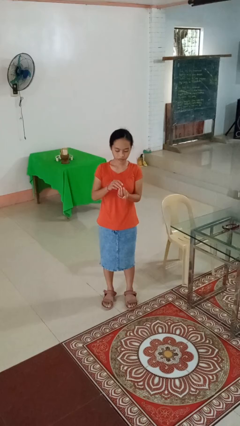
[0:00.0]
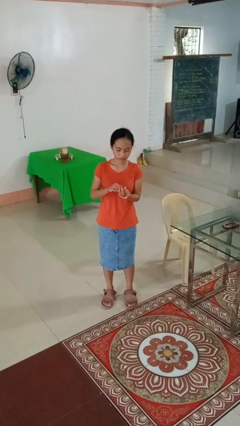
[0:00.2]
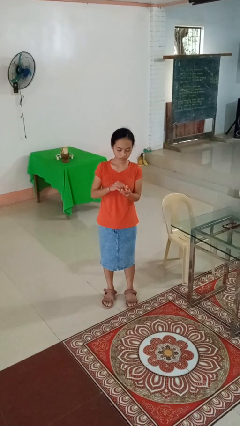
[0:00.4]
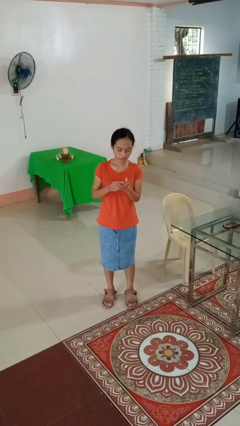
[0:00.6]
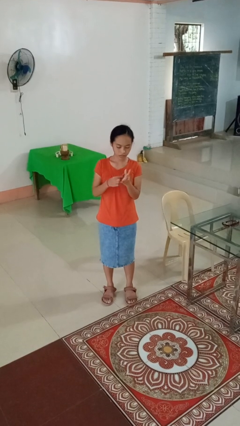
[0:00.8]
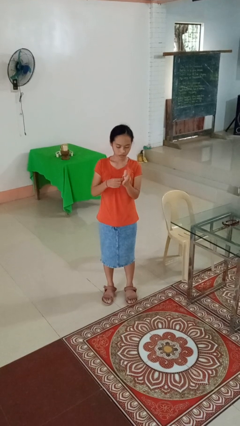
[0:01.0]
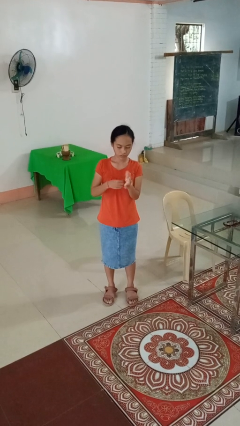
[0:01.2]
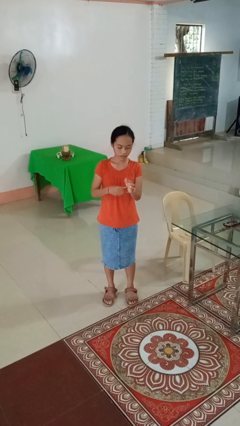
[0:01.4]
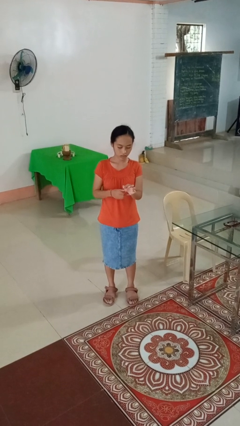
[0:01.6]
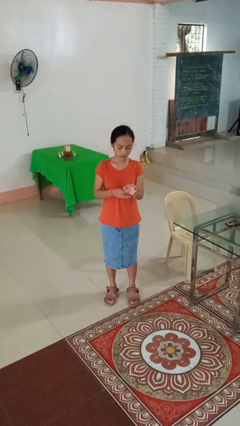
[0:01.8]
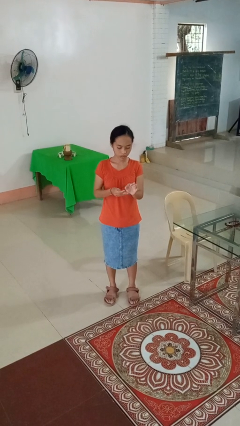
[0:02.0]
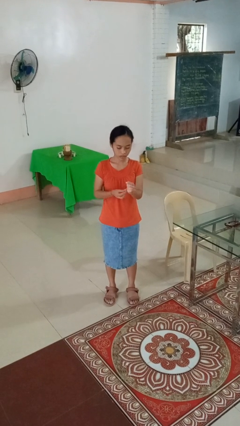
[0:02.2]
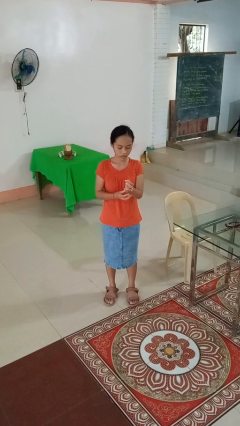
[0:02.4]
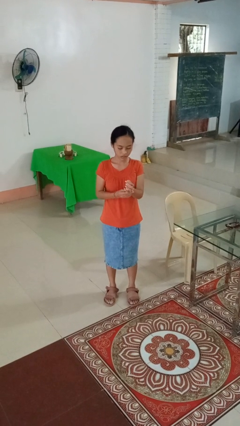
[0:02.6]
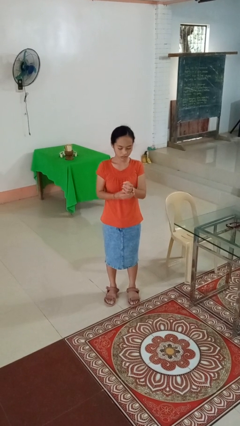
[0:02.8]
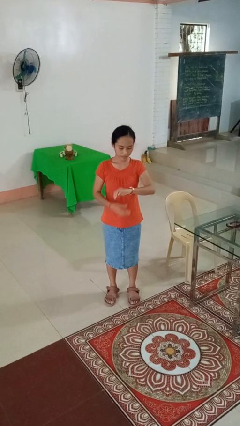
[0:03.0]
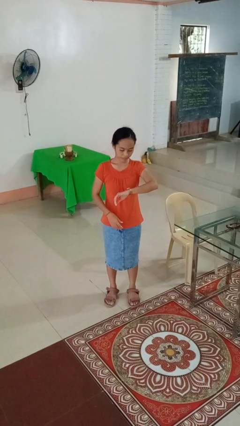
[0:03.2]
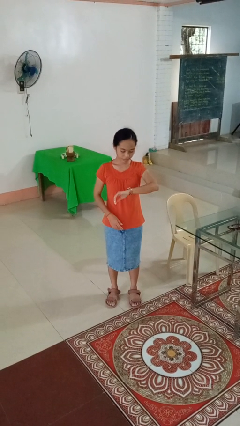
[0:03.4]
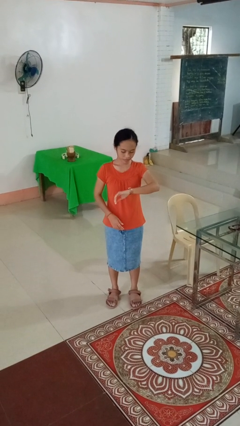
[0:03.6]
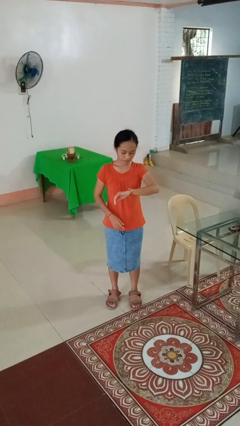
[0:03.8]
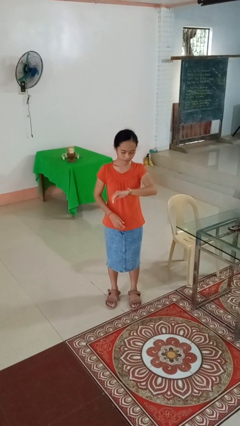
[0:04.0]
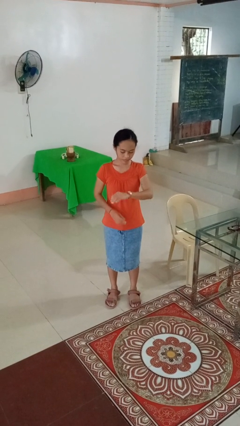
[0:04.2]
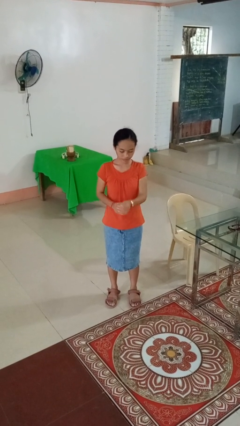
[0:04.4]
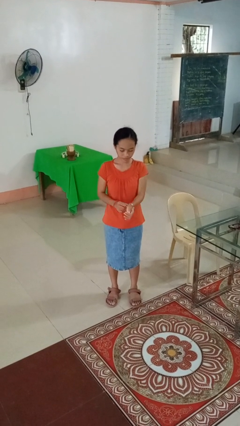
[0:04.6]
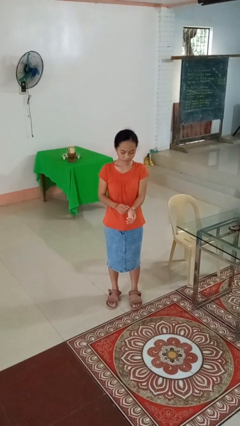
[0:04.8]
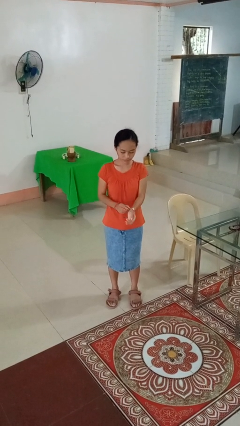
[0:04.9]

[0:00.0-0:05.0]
person puts on wristwatch

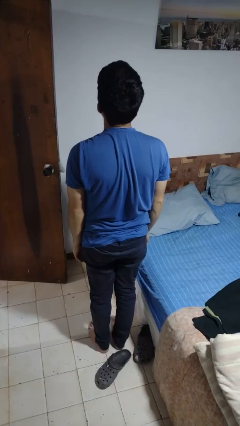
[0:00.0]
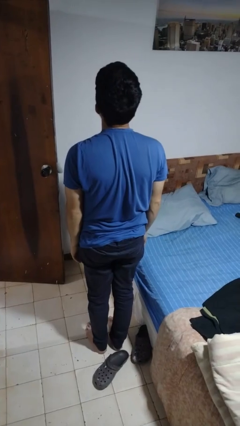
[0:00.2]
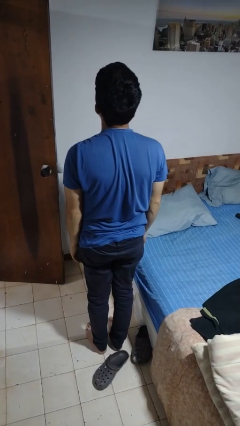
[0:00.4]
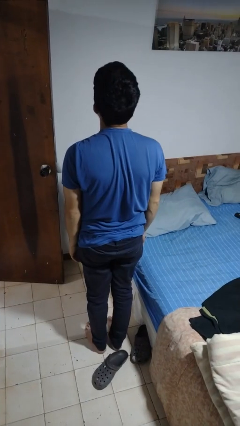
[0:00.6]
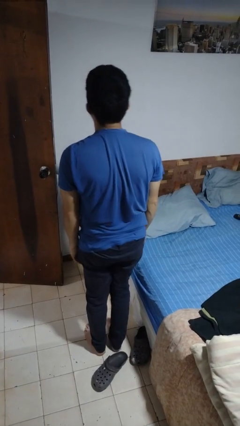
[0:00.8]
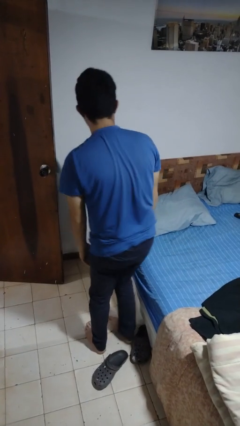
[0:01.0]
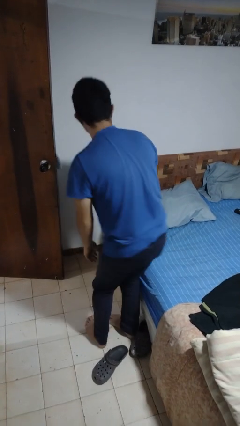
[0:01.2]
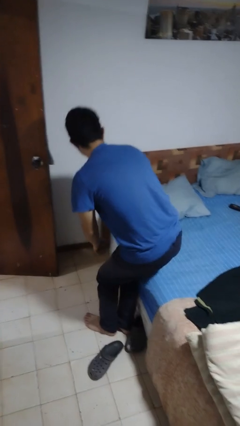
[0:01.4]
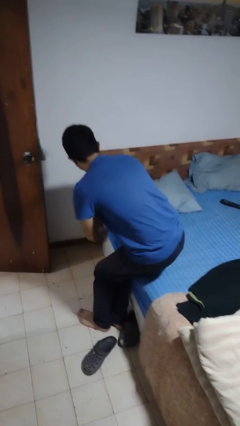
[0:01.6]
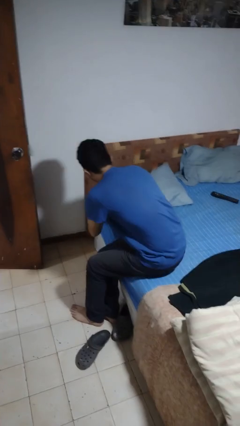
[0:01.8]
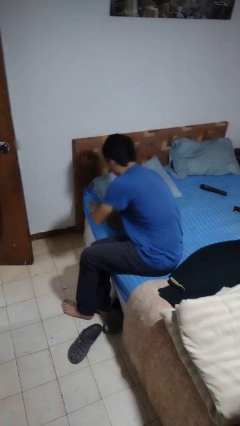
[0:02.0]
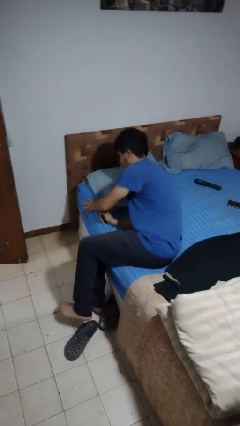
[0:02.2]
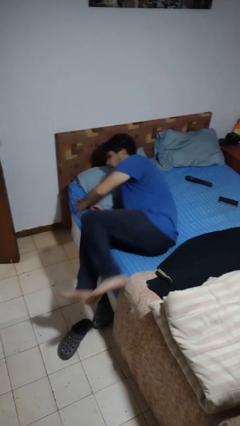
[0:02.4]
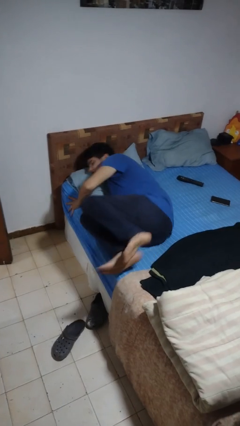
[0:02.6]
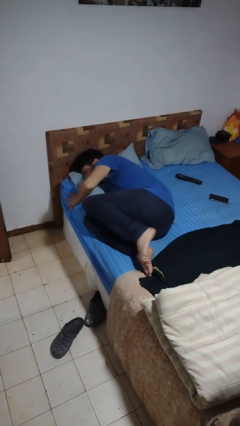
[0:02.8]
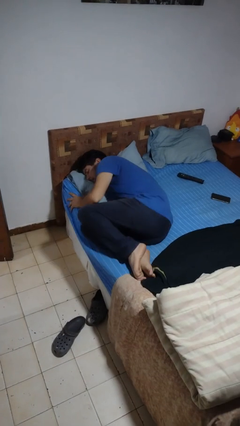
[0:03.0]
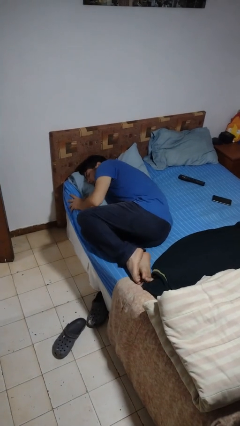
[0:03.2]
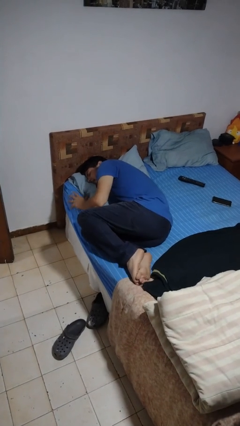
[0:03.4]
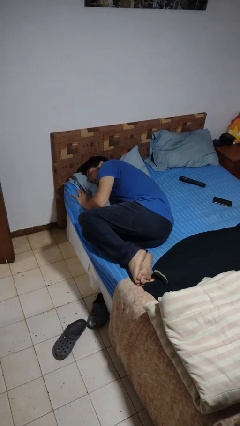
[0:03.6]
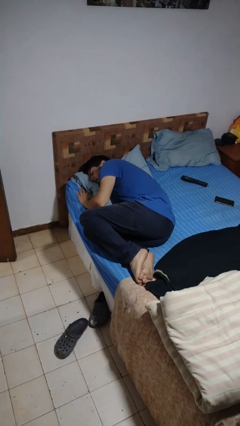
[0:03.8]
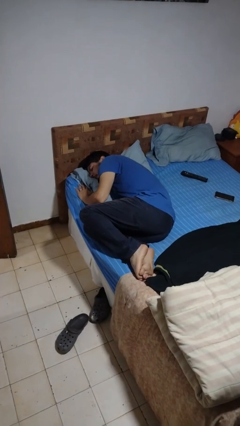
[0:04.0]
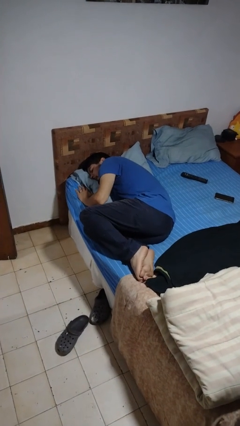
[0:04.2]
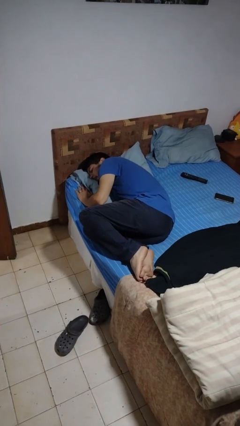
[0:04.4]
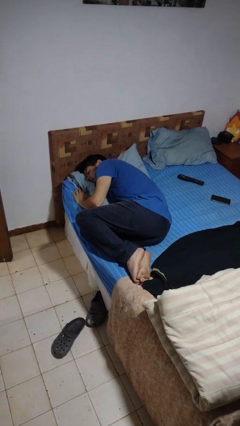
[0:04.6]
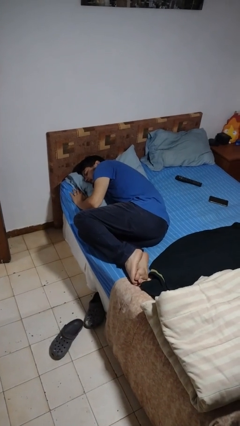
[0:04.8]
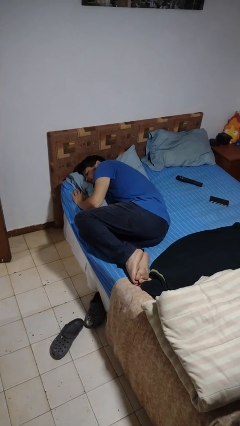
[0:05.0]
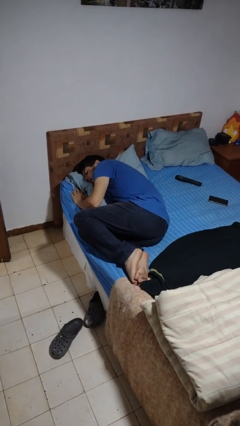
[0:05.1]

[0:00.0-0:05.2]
person lies down on bed

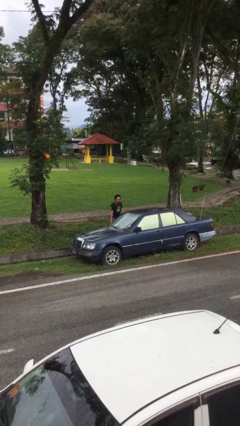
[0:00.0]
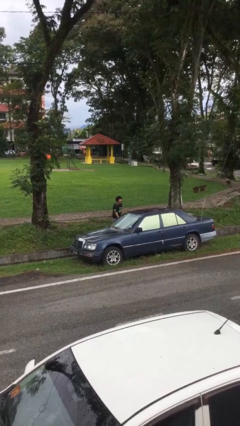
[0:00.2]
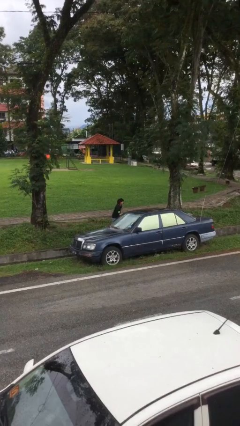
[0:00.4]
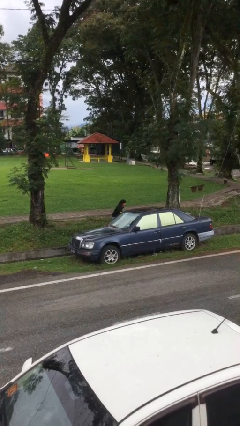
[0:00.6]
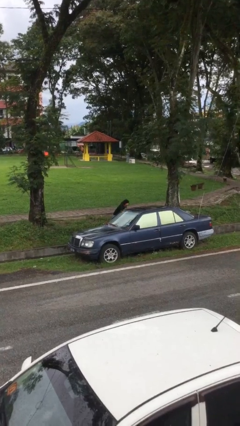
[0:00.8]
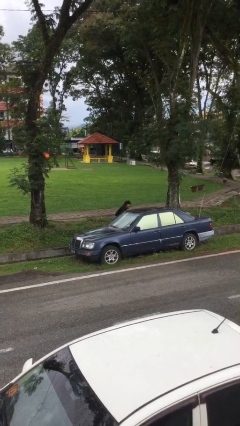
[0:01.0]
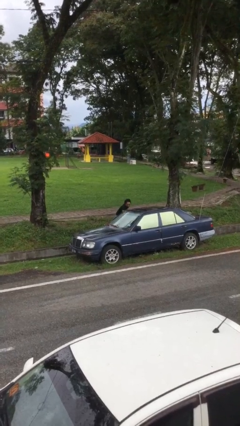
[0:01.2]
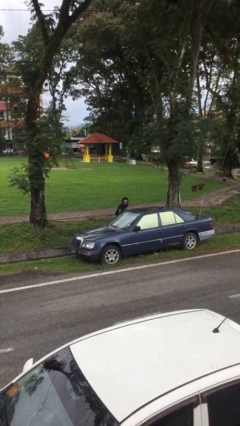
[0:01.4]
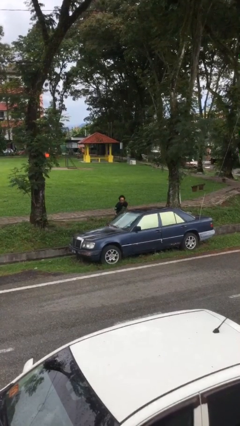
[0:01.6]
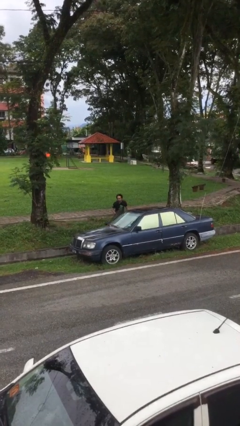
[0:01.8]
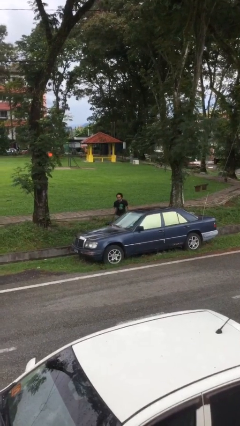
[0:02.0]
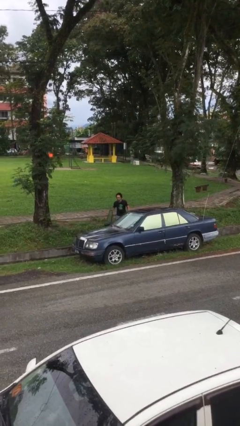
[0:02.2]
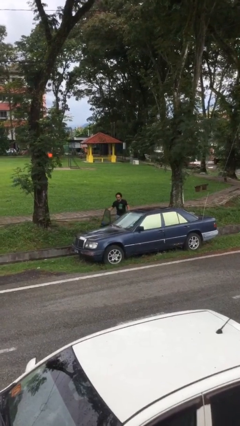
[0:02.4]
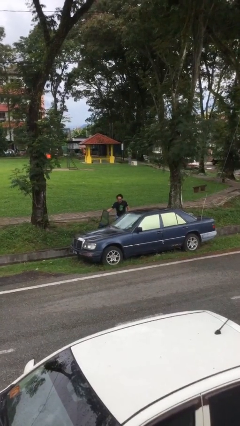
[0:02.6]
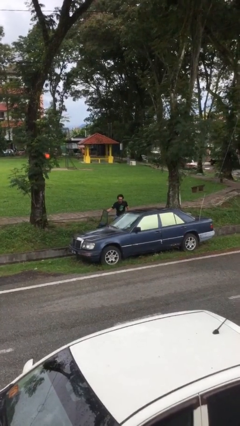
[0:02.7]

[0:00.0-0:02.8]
person opens car door

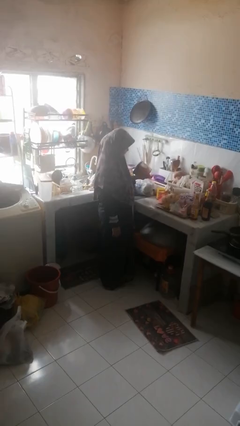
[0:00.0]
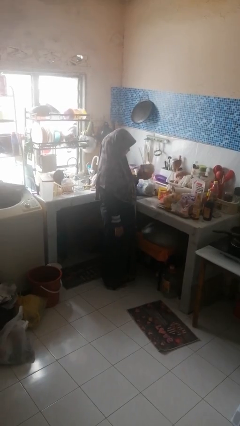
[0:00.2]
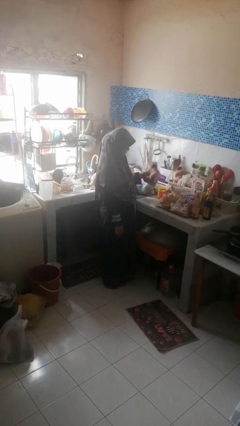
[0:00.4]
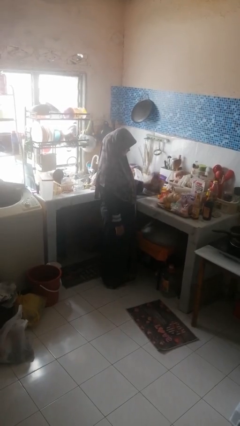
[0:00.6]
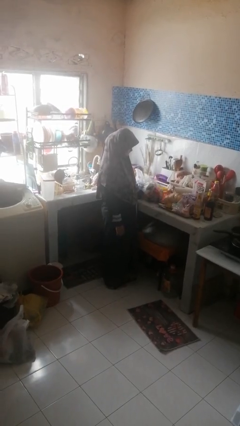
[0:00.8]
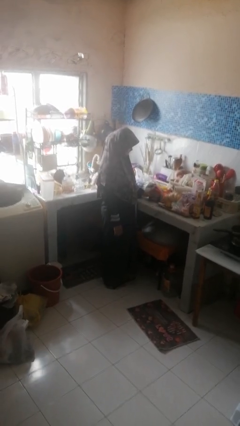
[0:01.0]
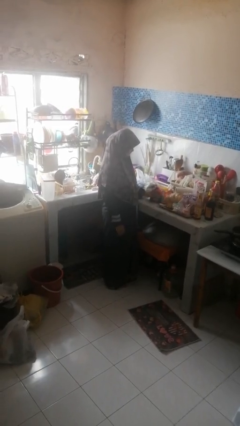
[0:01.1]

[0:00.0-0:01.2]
person puts down object on countertop

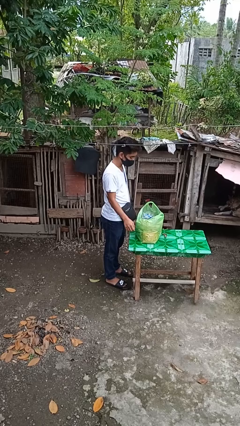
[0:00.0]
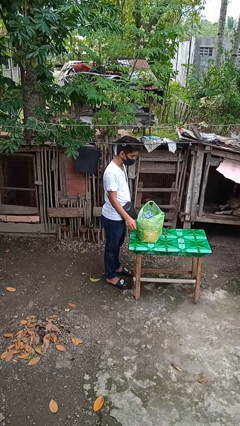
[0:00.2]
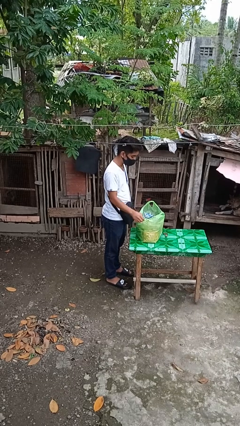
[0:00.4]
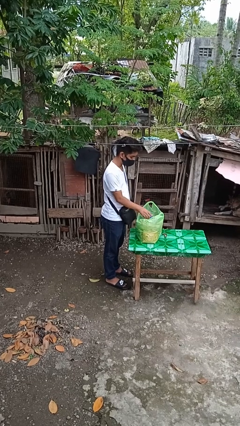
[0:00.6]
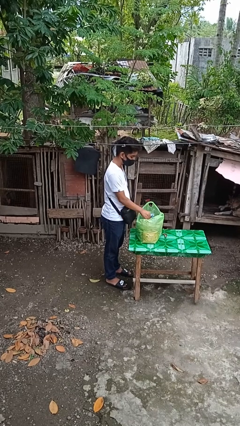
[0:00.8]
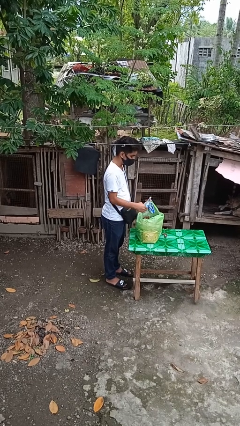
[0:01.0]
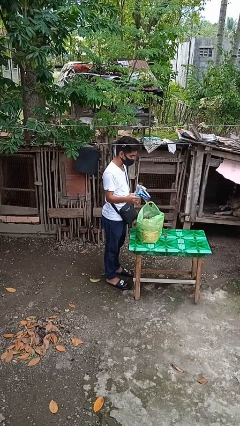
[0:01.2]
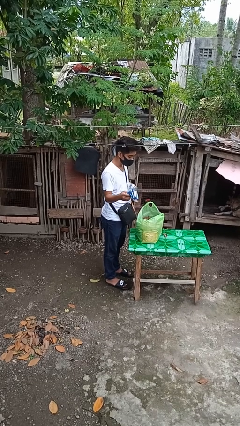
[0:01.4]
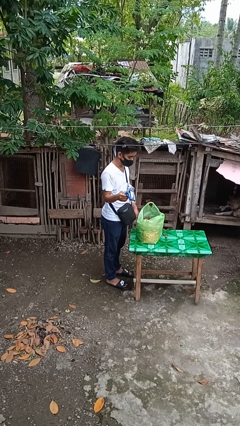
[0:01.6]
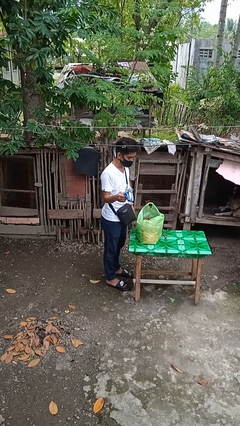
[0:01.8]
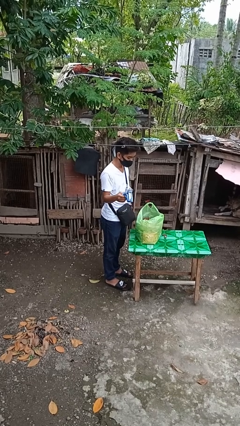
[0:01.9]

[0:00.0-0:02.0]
person takes object from bag

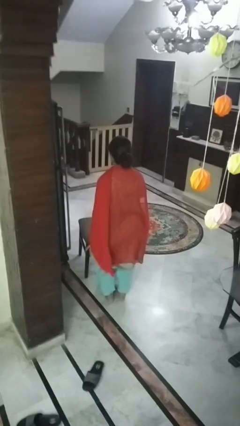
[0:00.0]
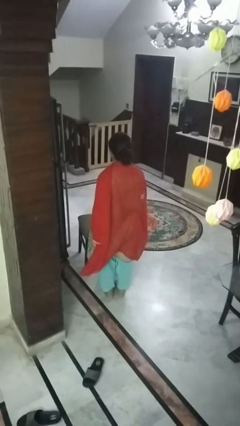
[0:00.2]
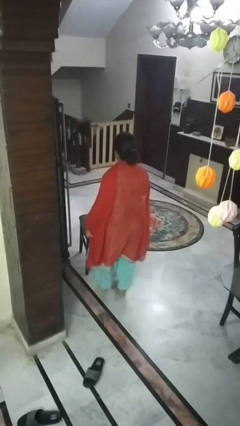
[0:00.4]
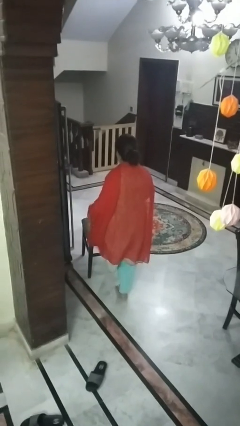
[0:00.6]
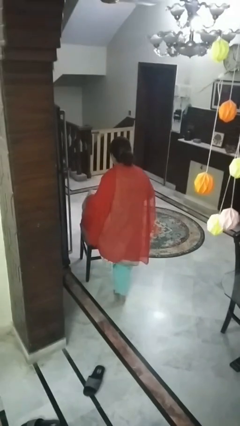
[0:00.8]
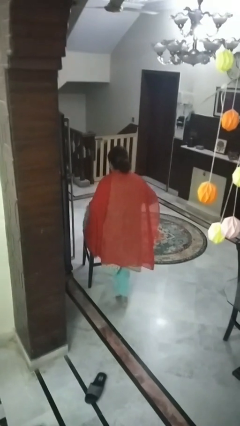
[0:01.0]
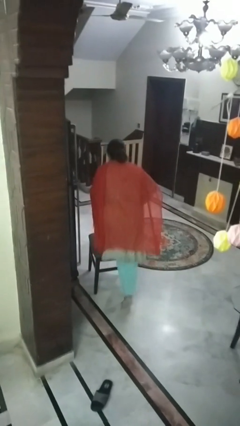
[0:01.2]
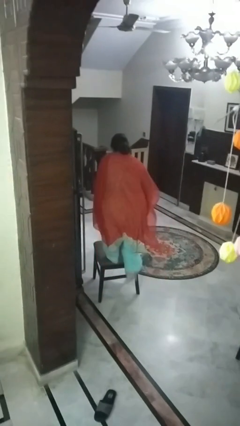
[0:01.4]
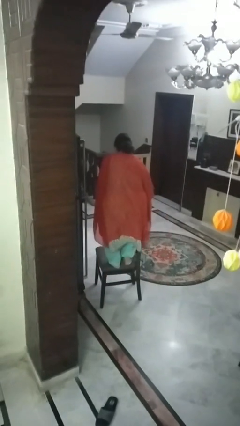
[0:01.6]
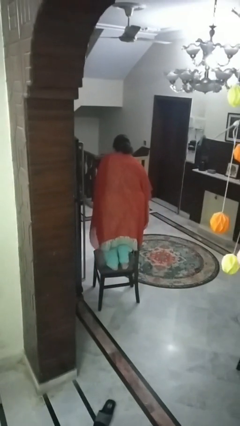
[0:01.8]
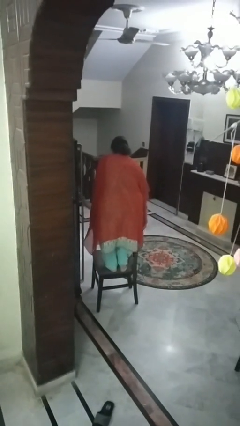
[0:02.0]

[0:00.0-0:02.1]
person climbs on chair
